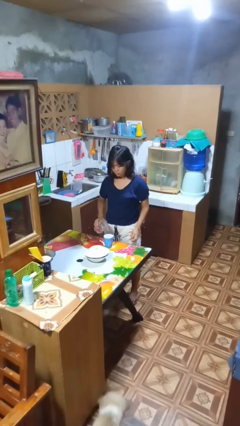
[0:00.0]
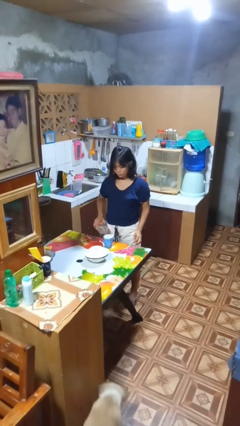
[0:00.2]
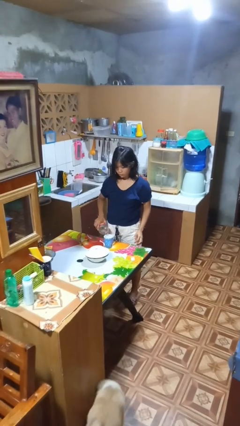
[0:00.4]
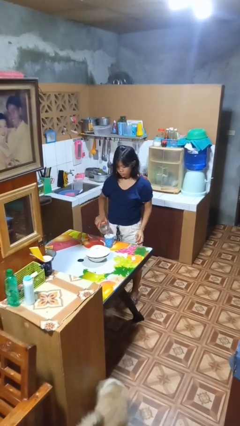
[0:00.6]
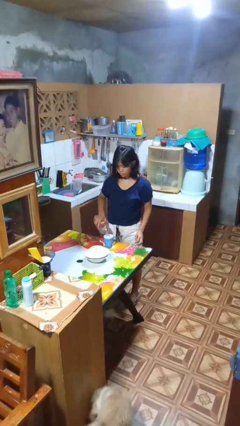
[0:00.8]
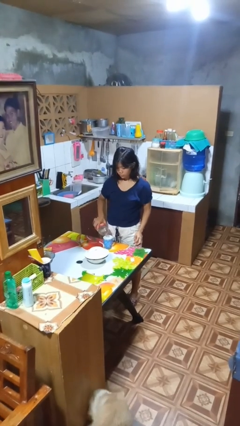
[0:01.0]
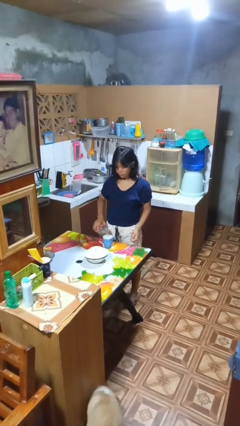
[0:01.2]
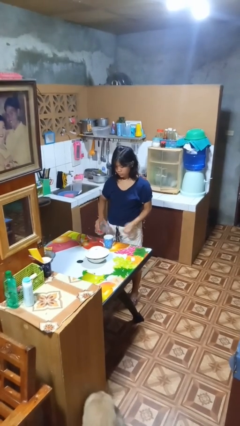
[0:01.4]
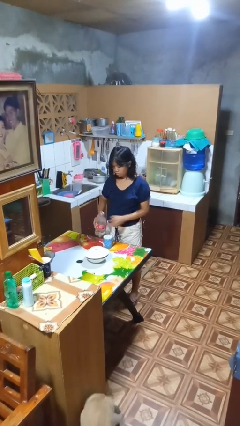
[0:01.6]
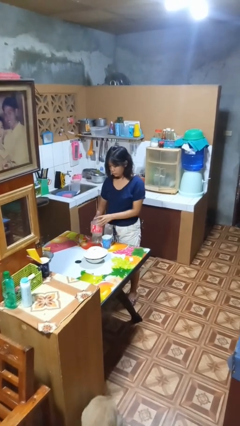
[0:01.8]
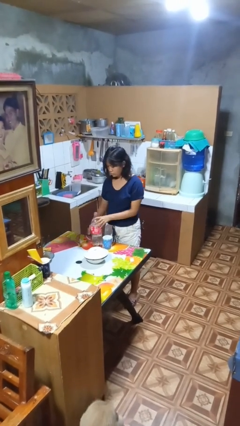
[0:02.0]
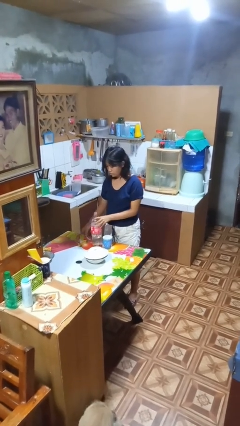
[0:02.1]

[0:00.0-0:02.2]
person pours liquid into cup

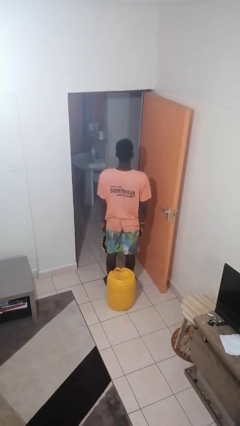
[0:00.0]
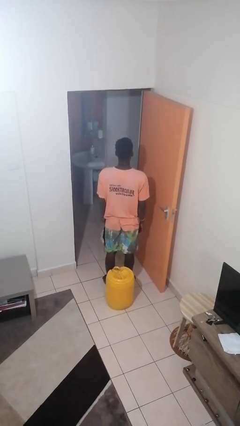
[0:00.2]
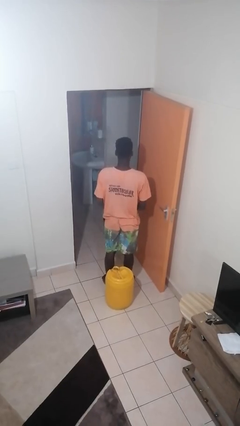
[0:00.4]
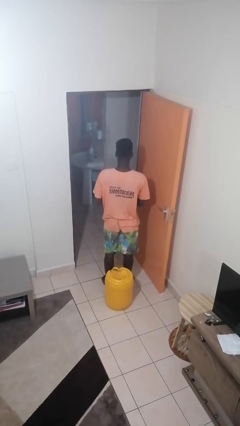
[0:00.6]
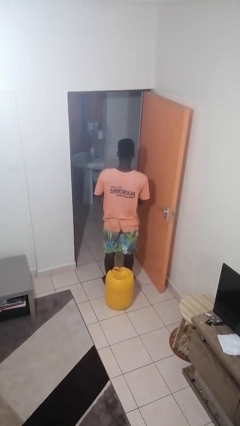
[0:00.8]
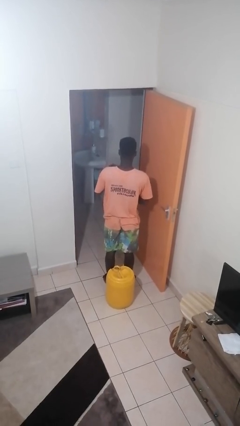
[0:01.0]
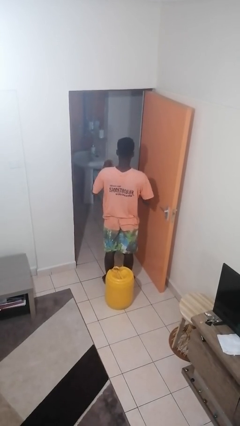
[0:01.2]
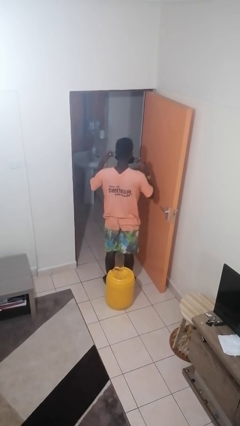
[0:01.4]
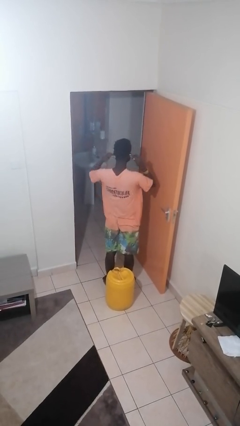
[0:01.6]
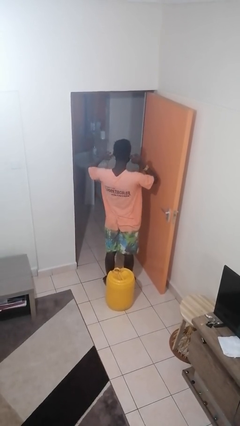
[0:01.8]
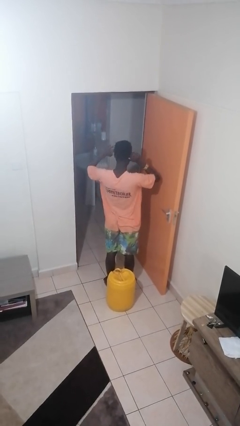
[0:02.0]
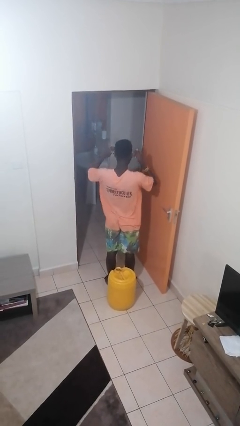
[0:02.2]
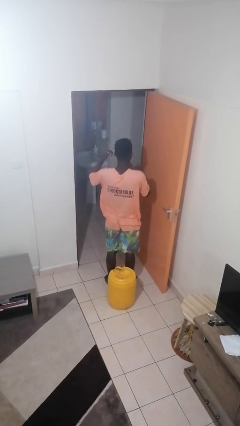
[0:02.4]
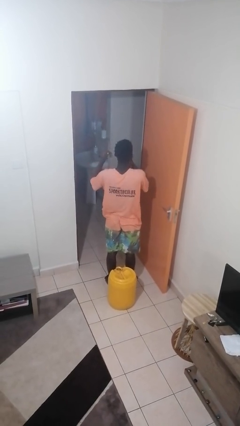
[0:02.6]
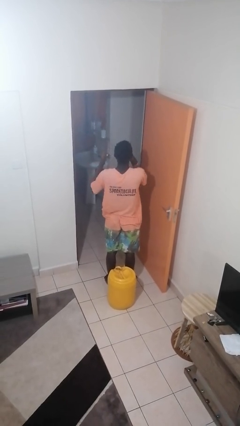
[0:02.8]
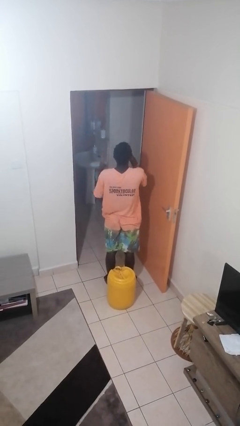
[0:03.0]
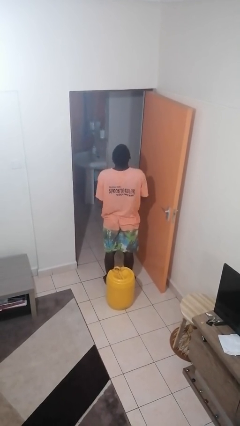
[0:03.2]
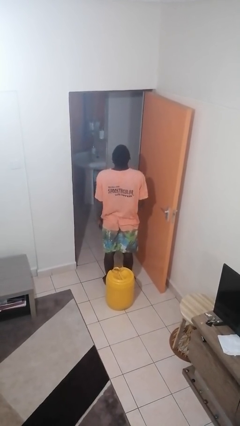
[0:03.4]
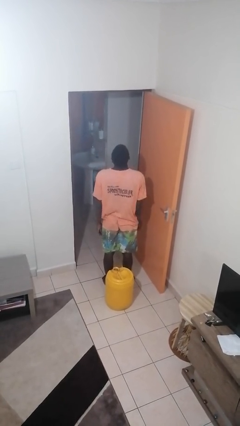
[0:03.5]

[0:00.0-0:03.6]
person puts on facemask

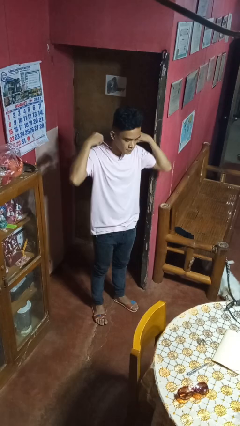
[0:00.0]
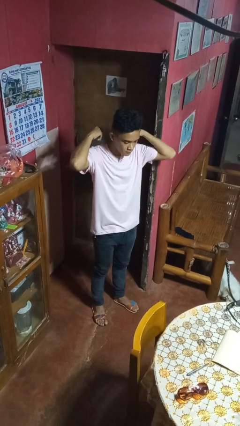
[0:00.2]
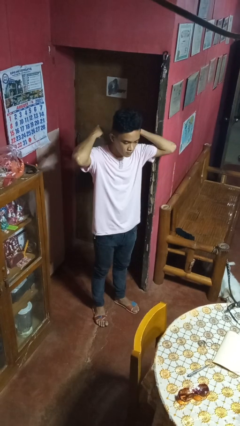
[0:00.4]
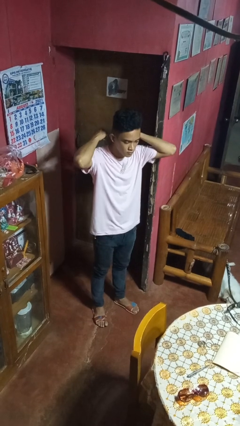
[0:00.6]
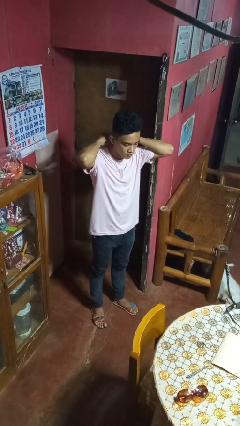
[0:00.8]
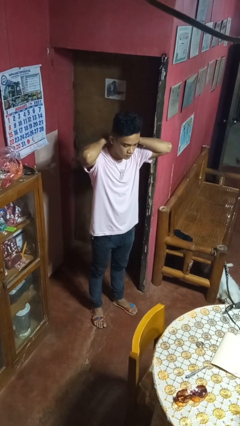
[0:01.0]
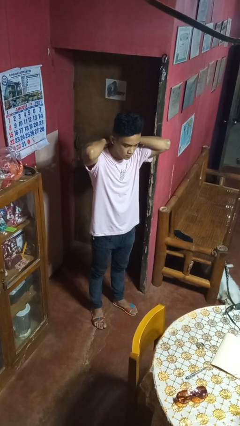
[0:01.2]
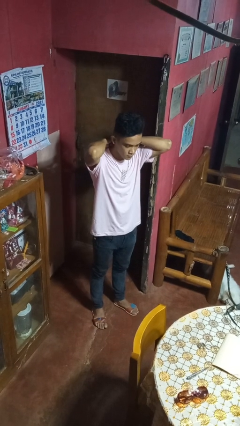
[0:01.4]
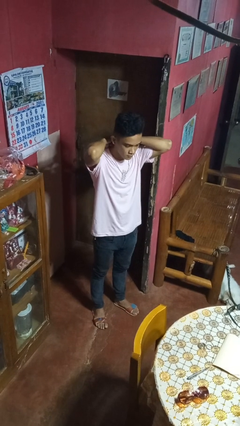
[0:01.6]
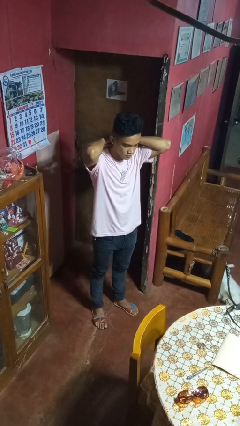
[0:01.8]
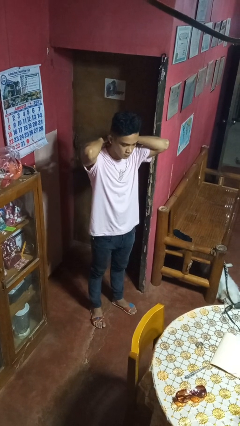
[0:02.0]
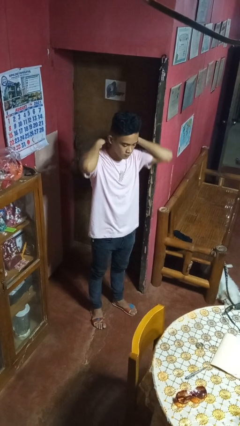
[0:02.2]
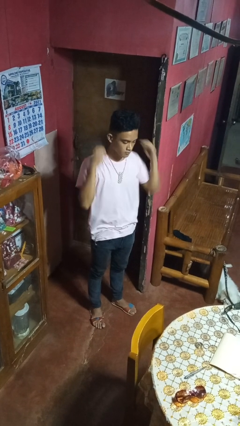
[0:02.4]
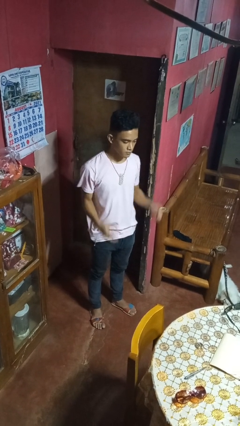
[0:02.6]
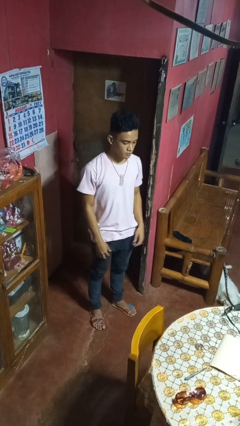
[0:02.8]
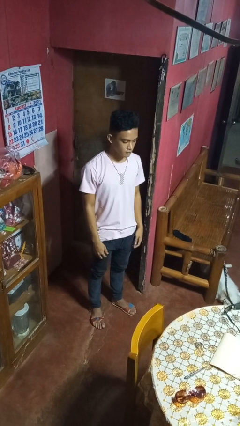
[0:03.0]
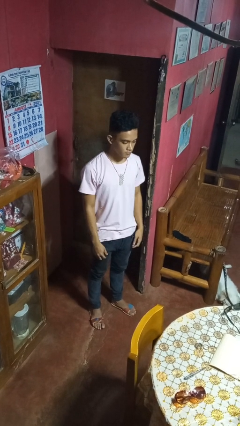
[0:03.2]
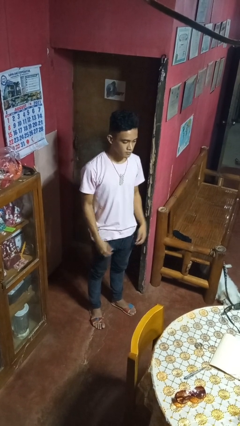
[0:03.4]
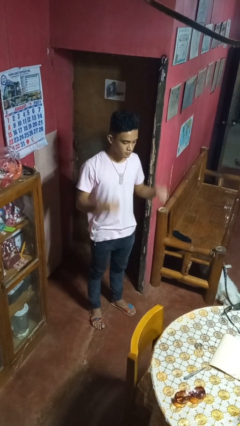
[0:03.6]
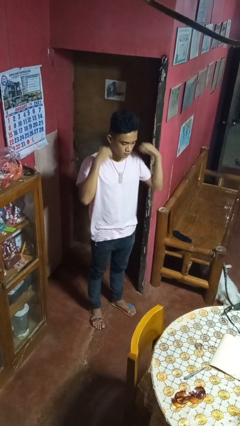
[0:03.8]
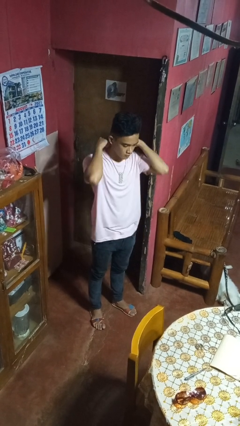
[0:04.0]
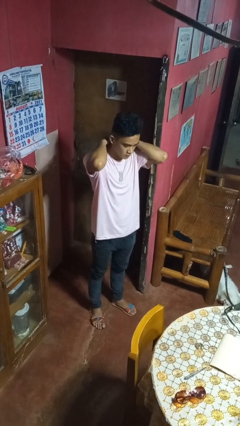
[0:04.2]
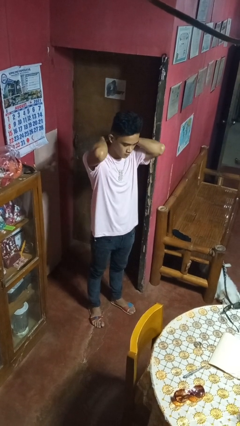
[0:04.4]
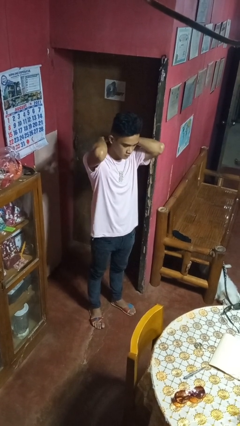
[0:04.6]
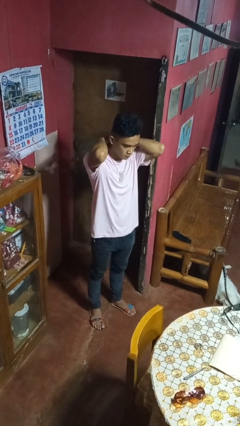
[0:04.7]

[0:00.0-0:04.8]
person puts on necklace

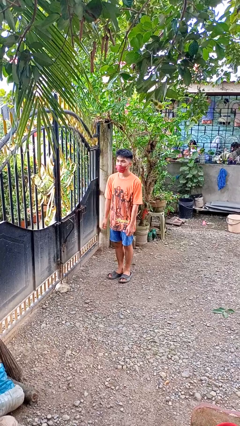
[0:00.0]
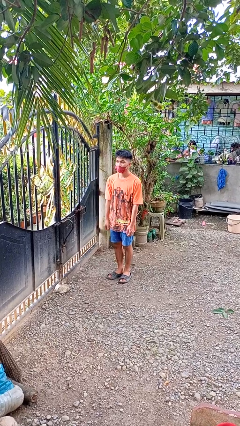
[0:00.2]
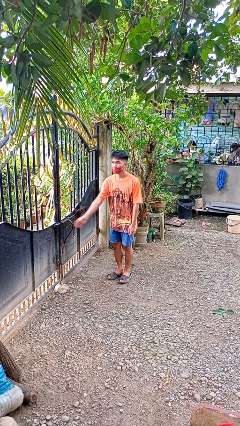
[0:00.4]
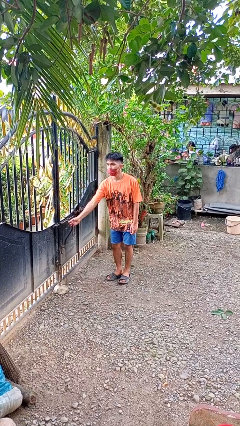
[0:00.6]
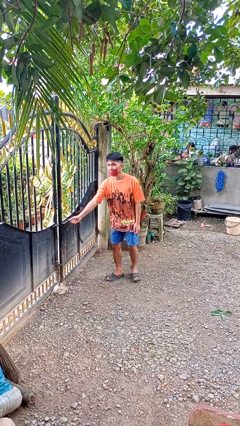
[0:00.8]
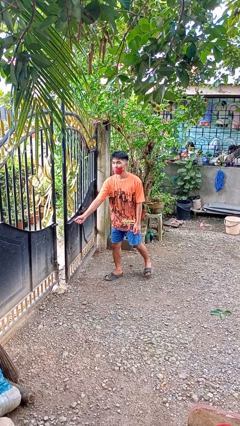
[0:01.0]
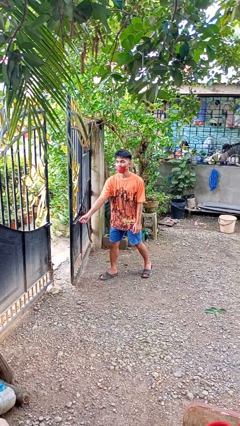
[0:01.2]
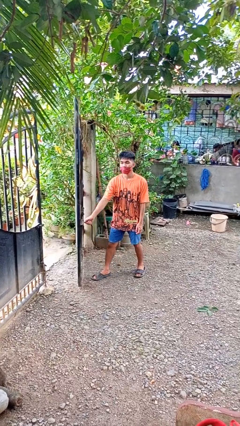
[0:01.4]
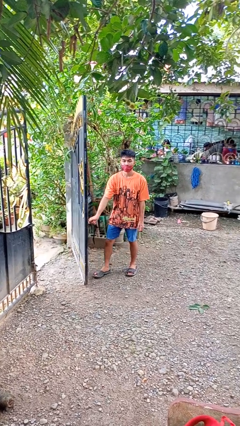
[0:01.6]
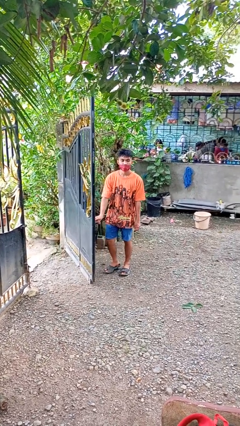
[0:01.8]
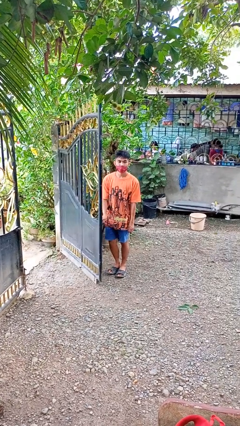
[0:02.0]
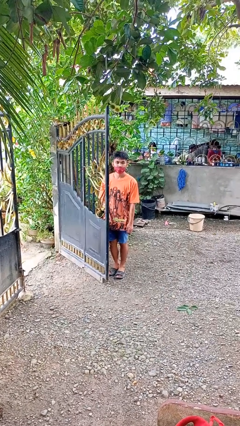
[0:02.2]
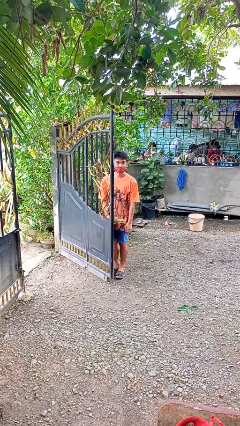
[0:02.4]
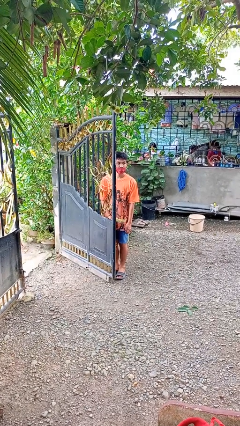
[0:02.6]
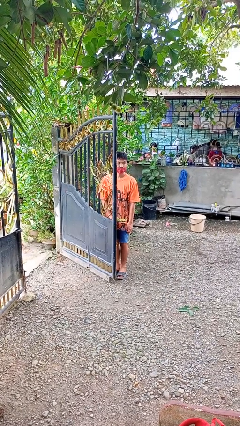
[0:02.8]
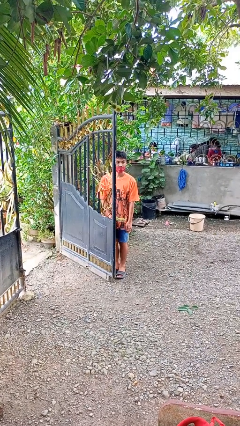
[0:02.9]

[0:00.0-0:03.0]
person opens gate

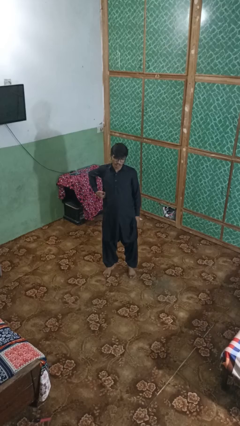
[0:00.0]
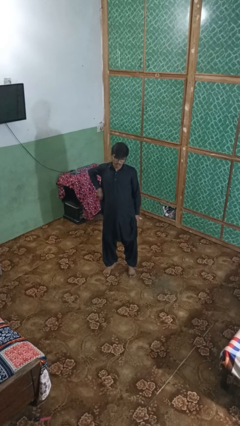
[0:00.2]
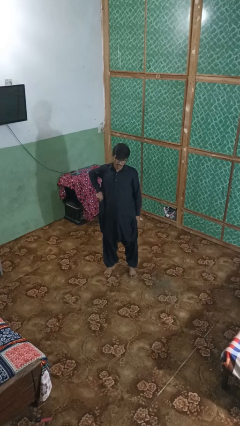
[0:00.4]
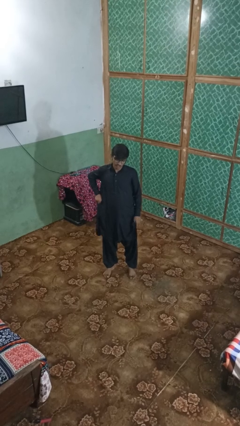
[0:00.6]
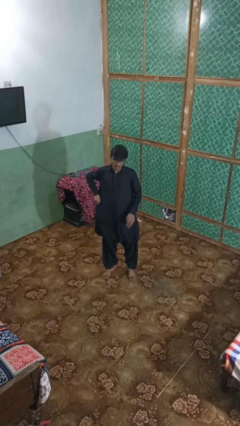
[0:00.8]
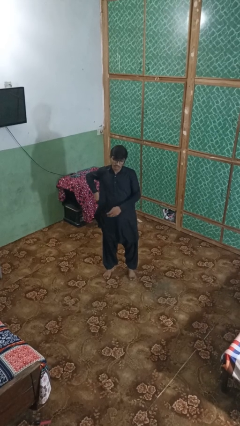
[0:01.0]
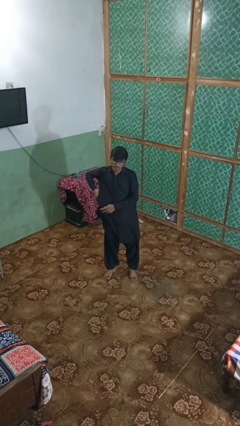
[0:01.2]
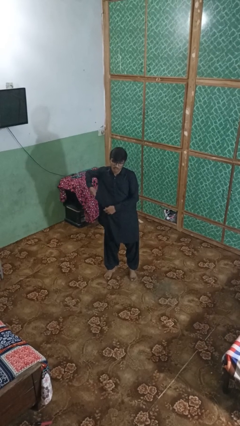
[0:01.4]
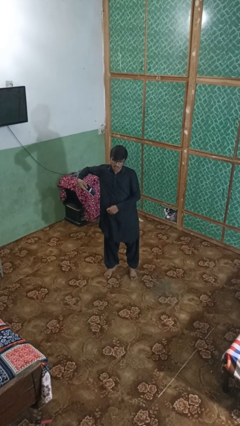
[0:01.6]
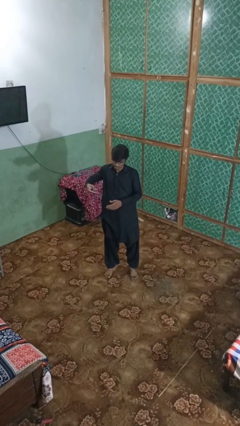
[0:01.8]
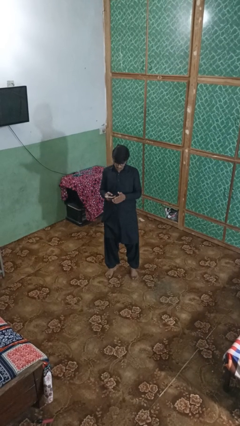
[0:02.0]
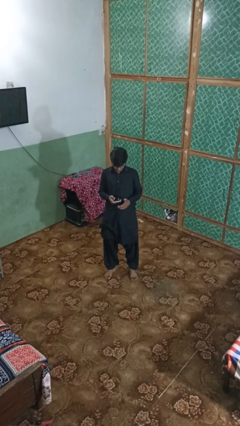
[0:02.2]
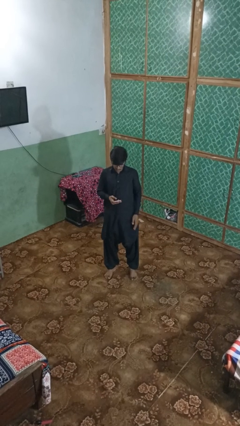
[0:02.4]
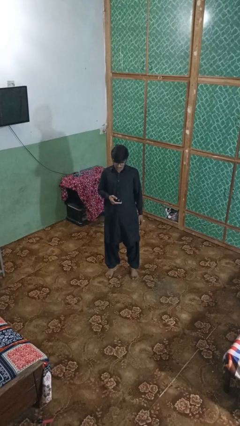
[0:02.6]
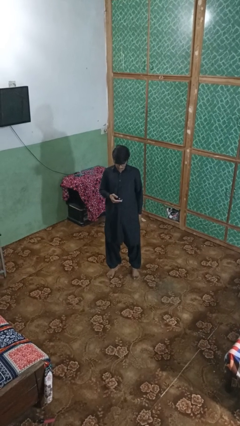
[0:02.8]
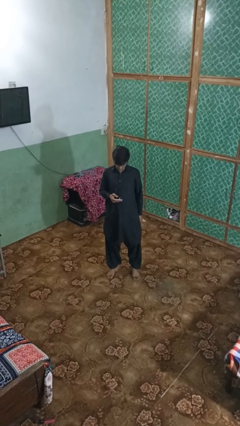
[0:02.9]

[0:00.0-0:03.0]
person takes phone from pocket

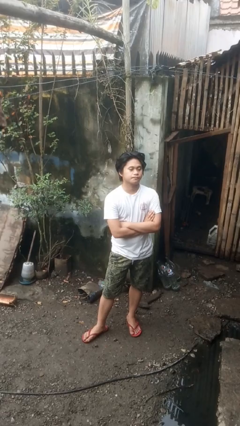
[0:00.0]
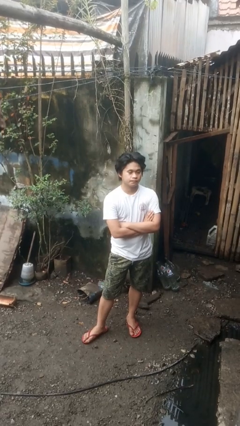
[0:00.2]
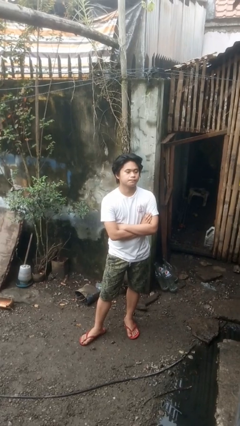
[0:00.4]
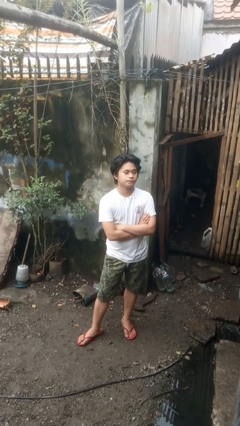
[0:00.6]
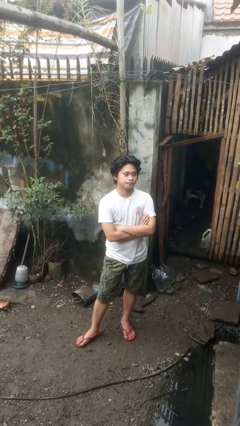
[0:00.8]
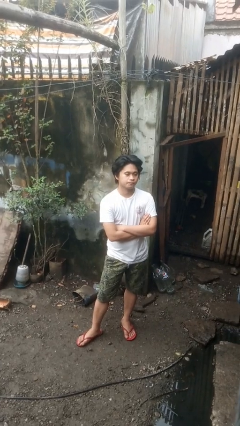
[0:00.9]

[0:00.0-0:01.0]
person nods head
